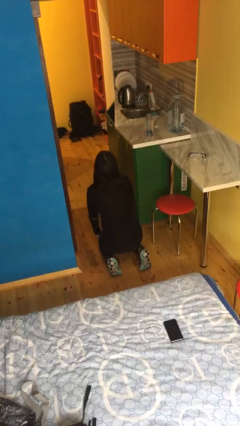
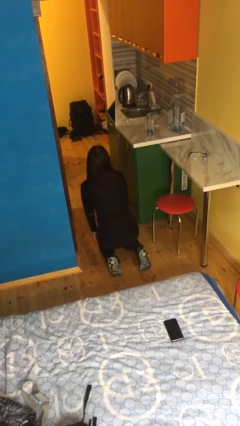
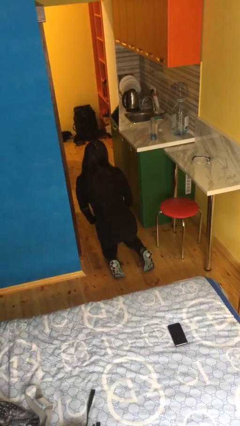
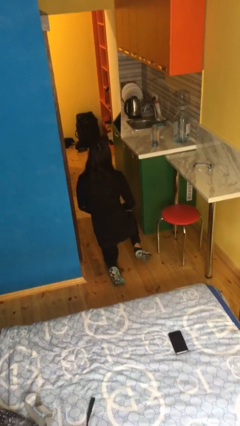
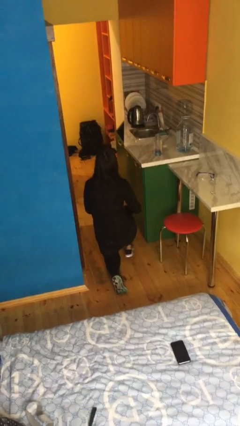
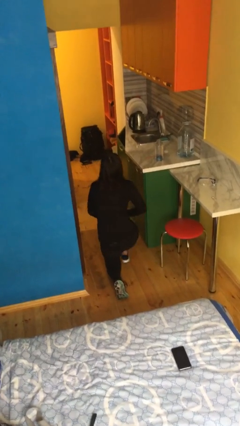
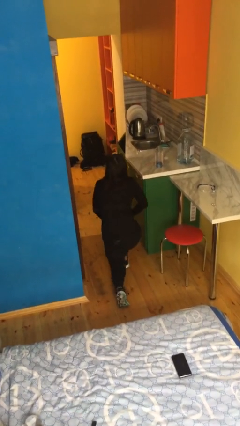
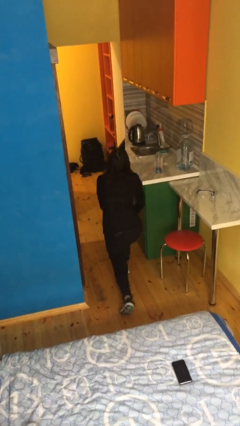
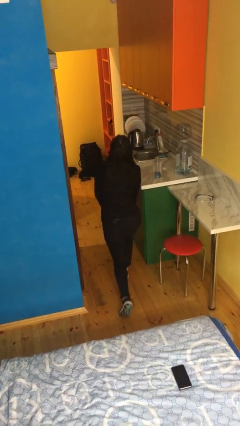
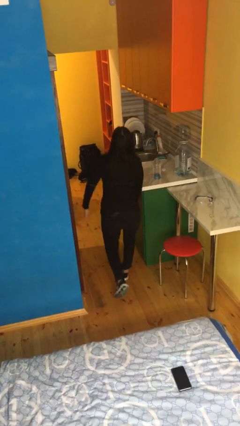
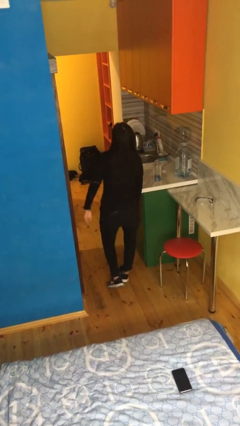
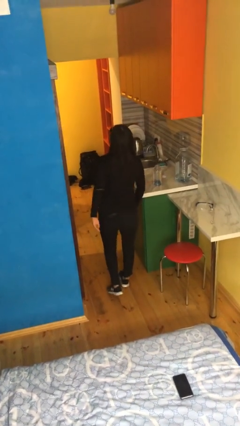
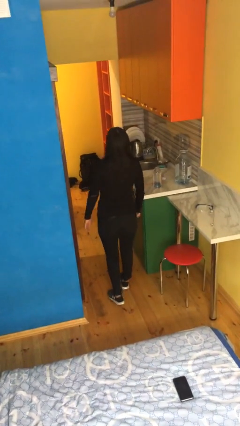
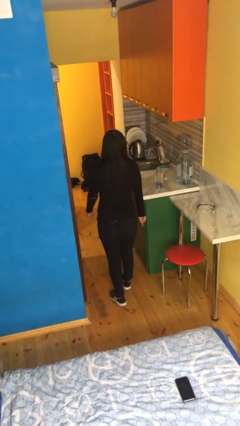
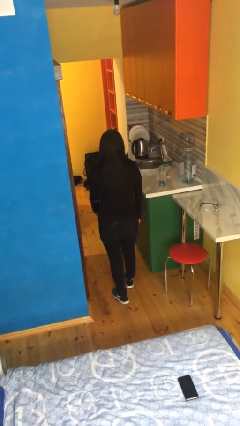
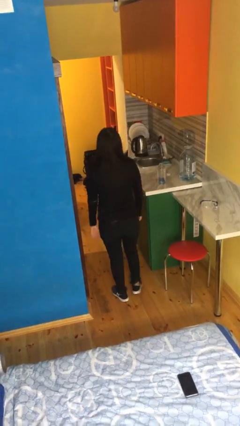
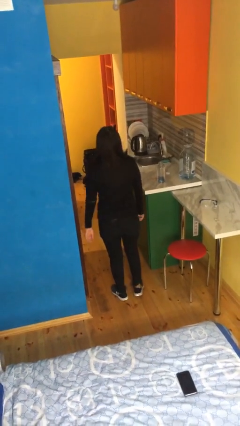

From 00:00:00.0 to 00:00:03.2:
person stands up from floor

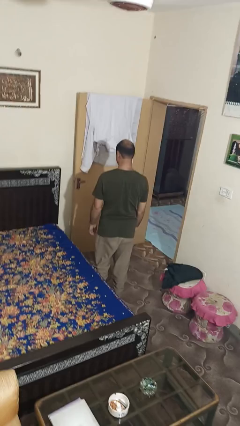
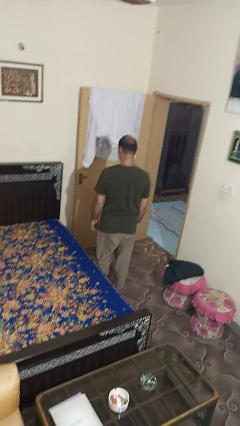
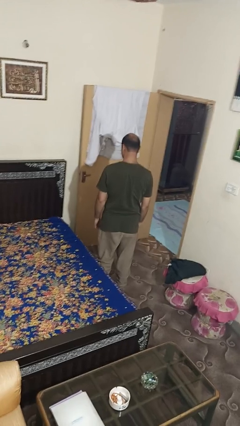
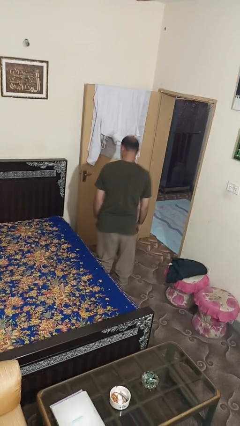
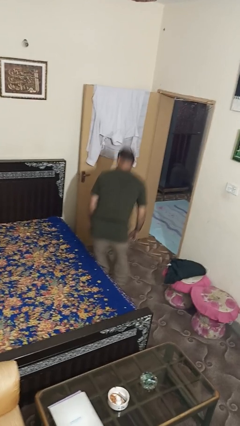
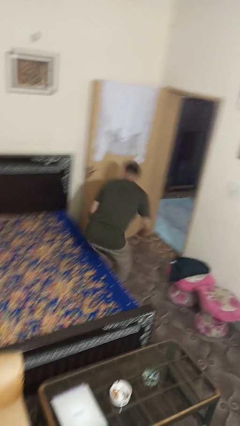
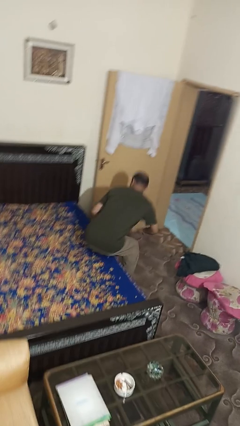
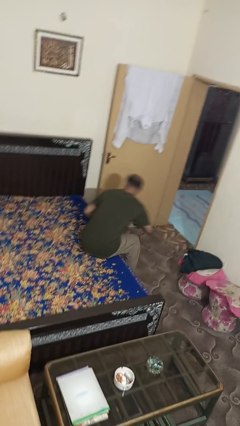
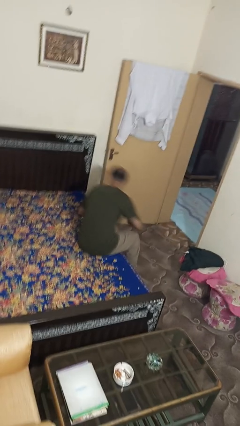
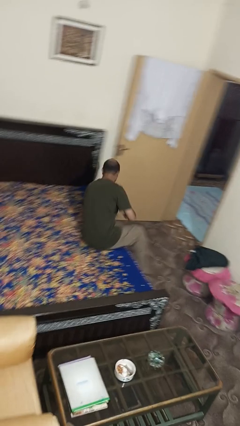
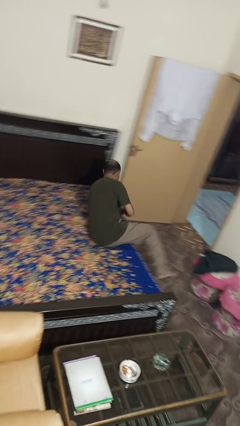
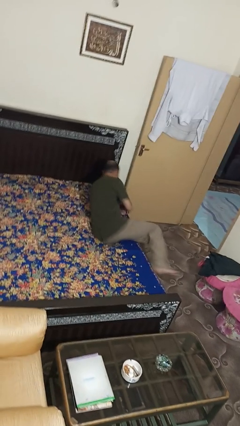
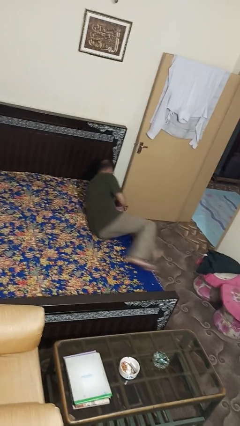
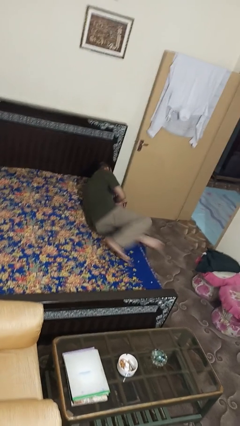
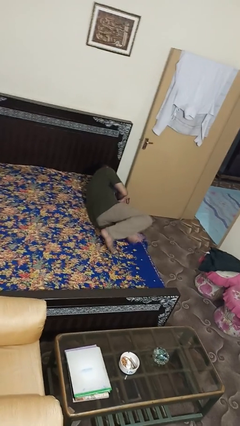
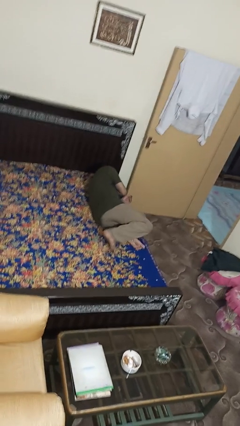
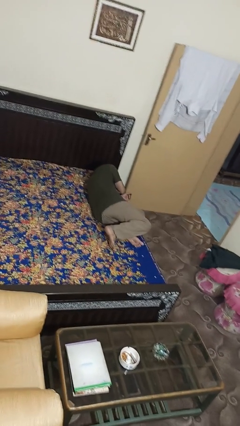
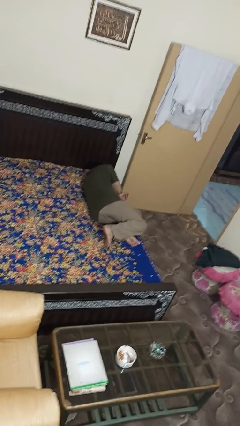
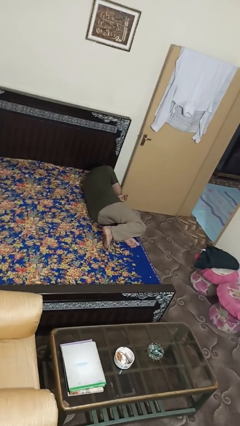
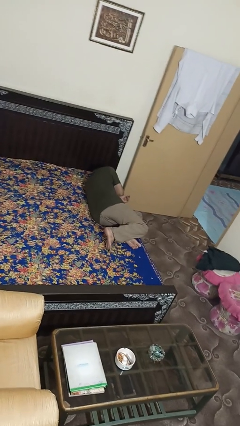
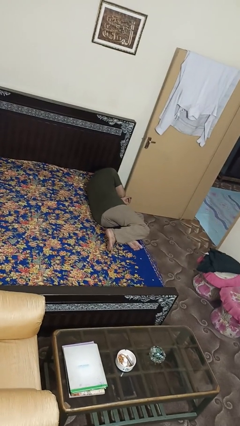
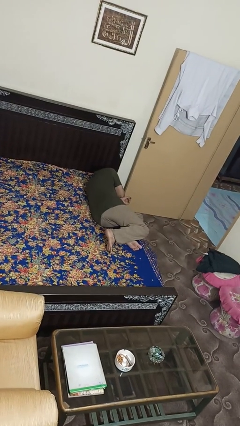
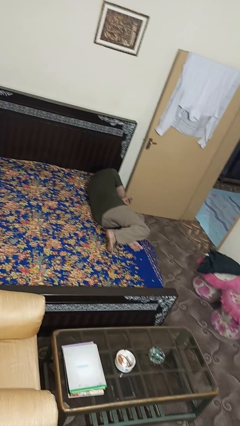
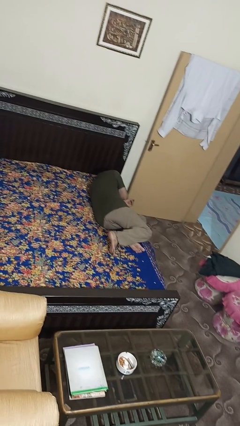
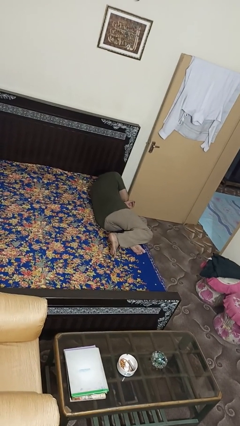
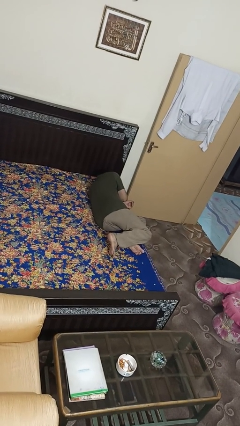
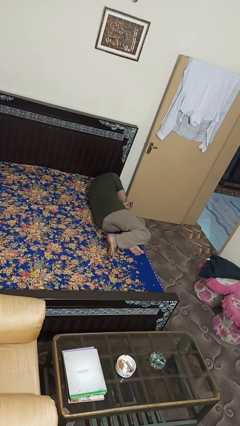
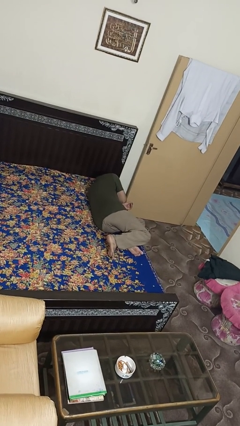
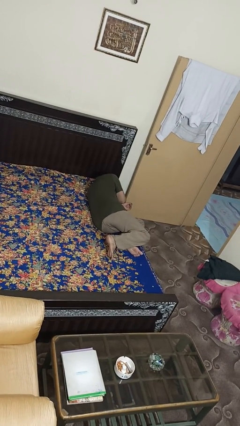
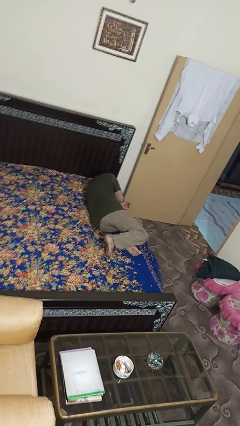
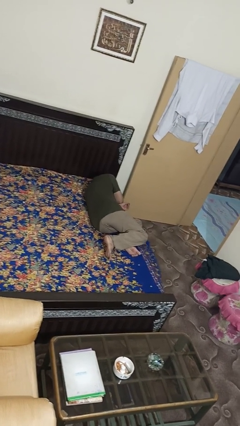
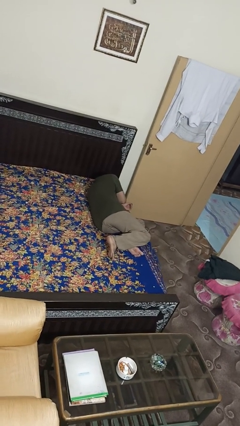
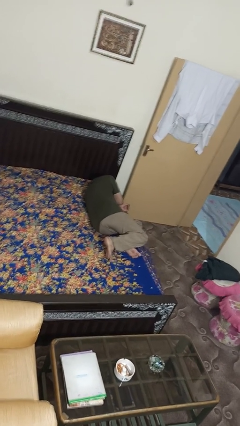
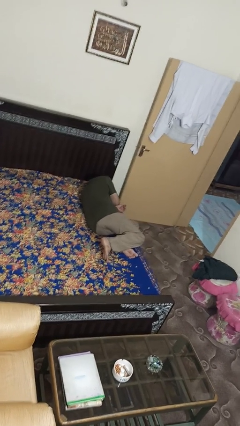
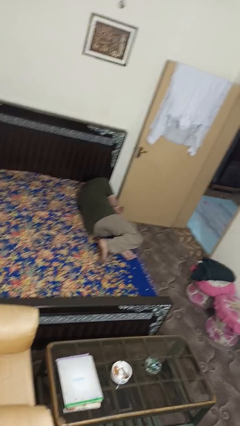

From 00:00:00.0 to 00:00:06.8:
person lies down on bed

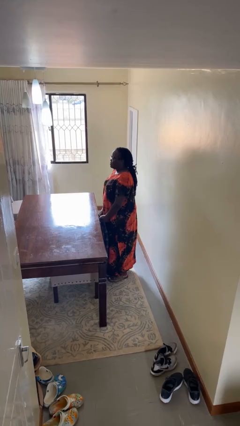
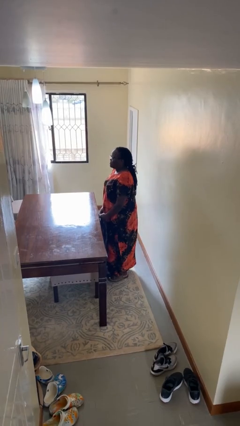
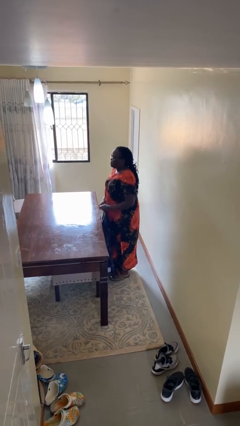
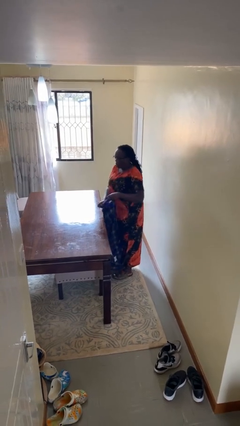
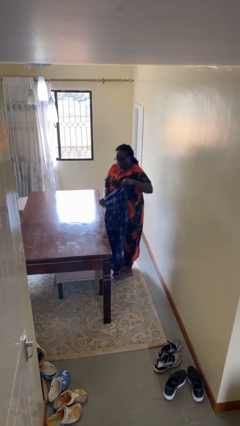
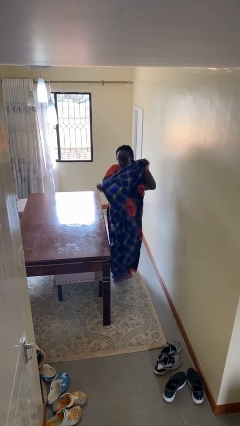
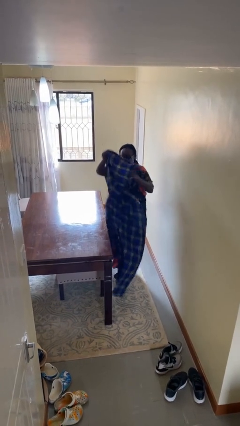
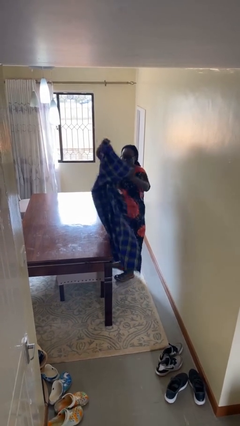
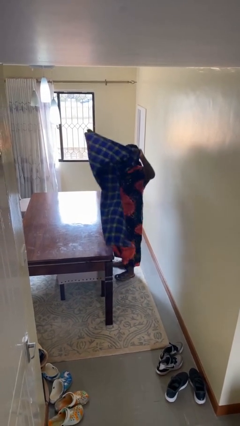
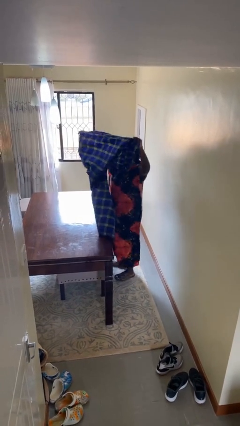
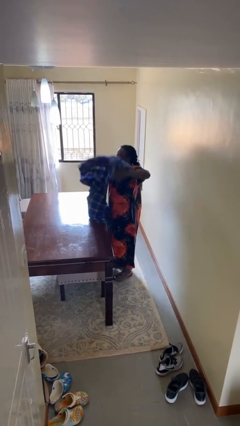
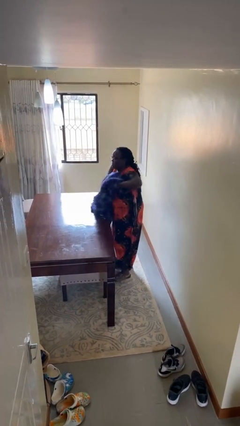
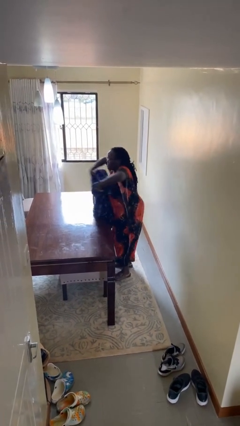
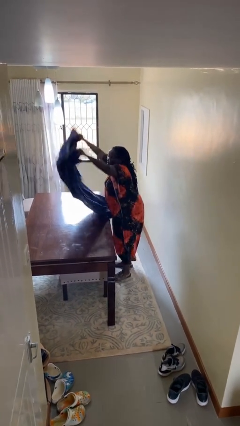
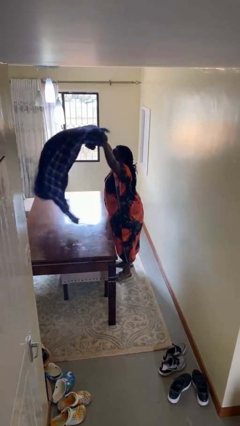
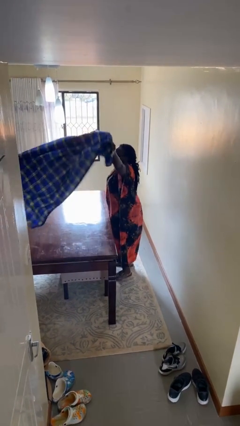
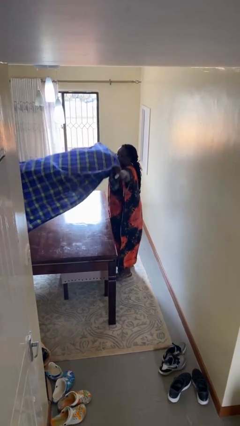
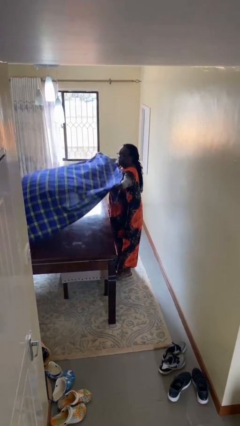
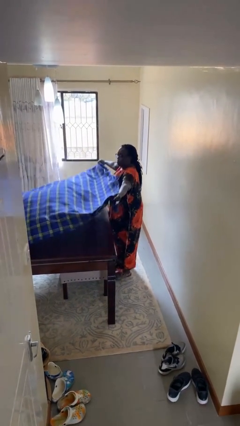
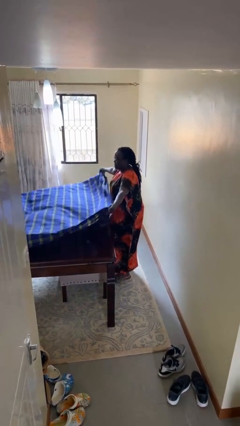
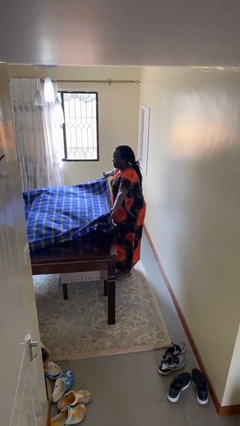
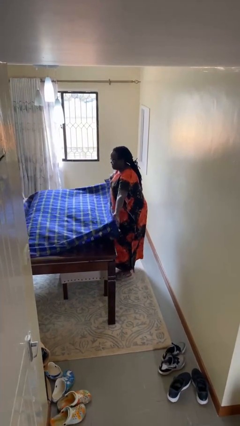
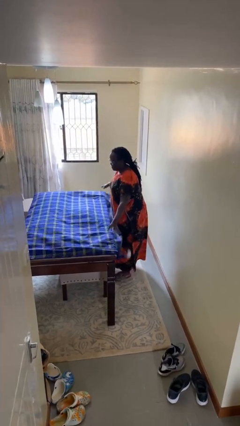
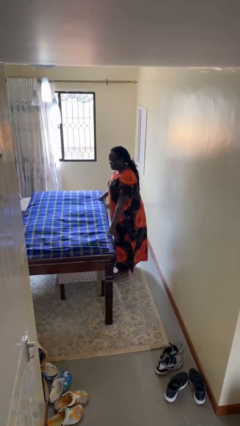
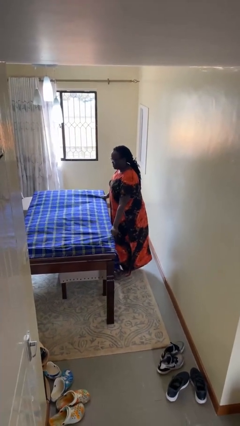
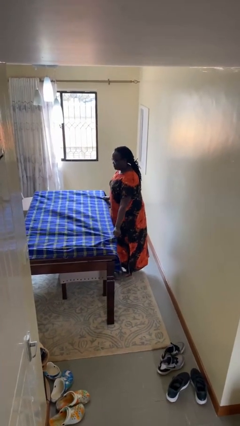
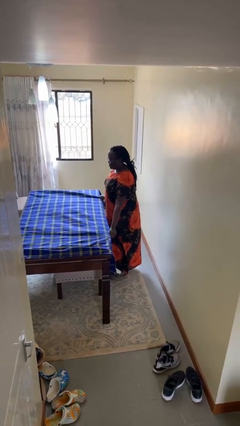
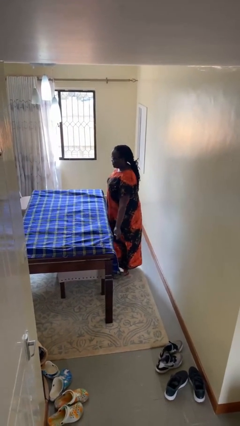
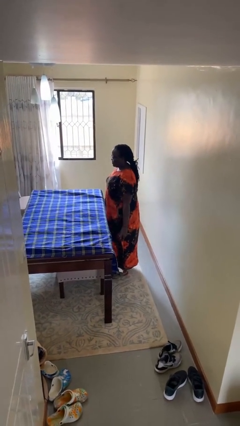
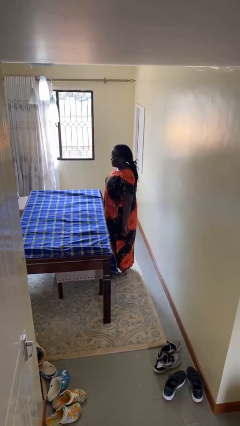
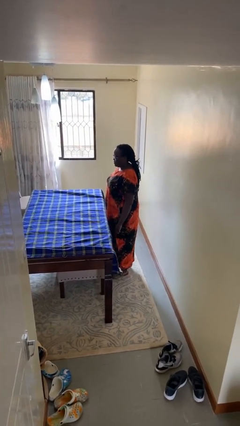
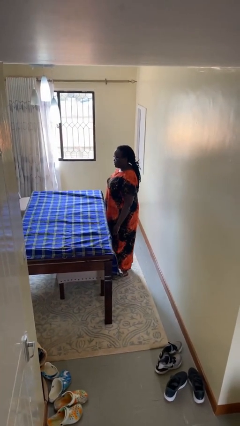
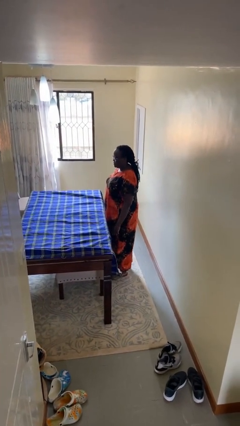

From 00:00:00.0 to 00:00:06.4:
person spreads tablecloth

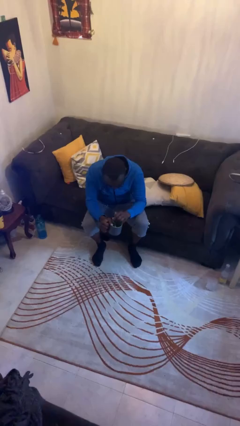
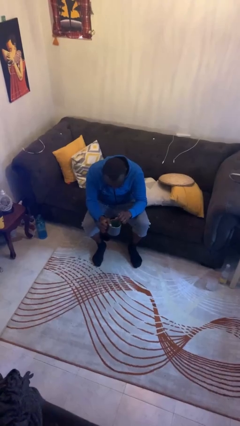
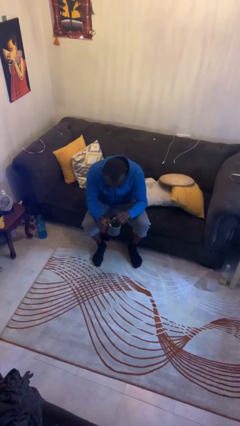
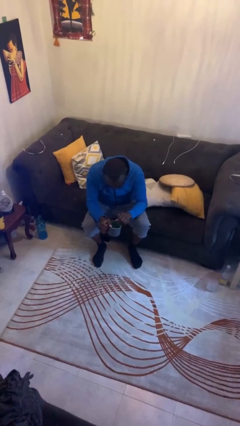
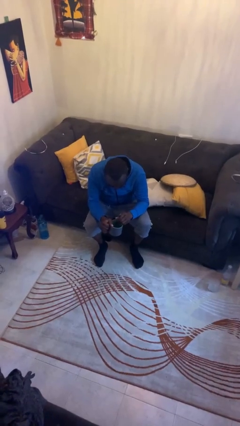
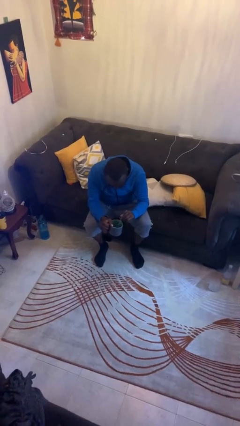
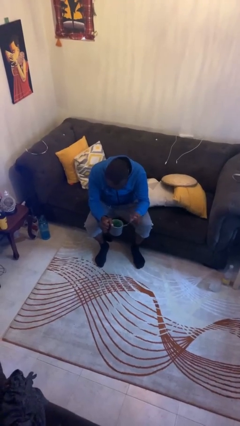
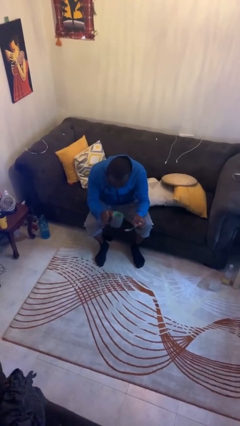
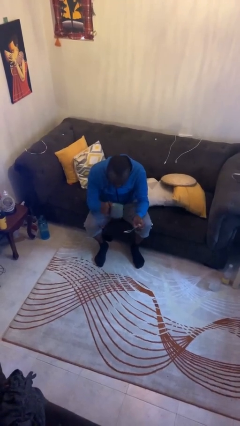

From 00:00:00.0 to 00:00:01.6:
person stirs mug
